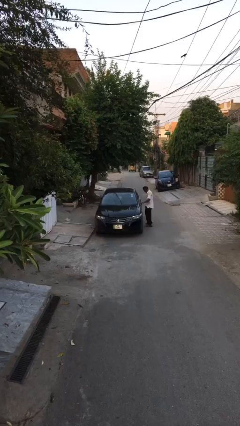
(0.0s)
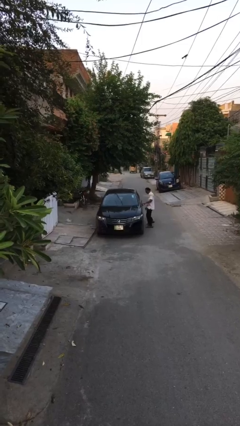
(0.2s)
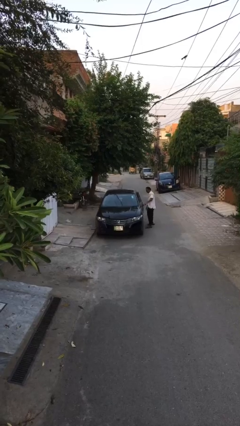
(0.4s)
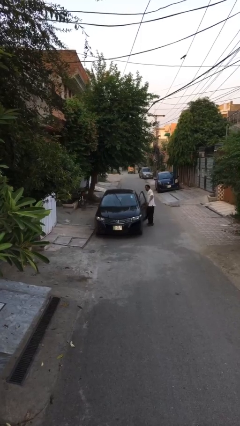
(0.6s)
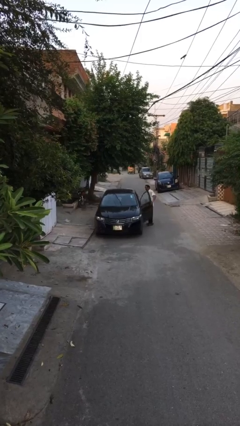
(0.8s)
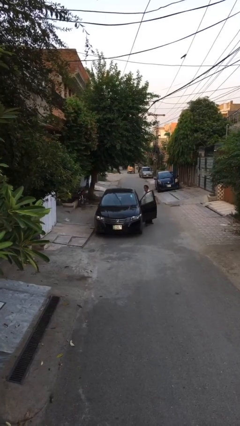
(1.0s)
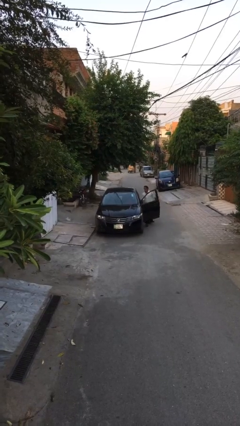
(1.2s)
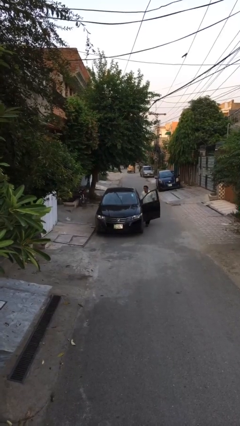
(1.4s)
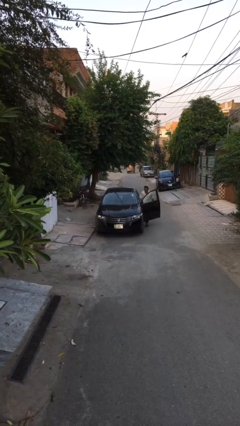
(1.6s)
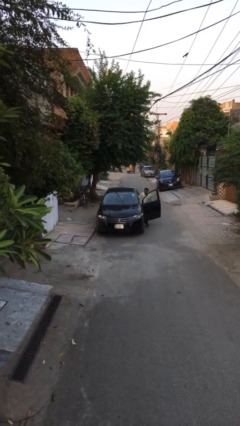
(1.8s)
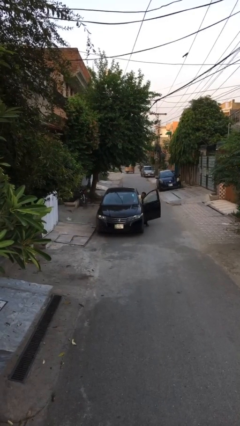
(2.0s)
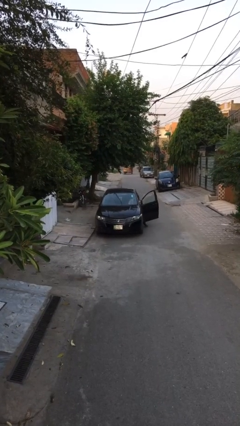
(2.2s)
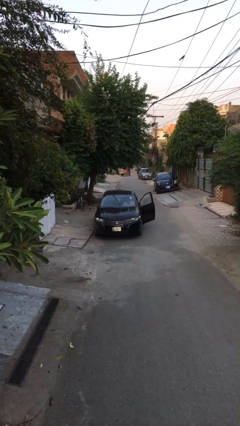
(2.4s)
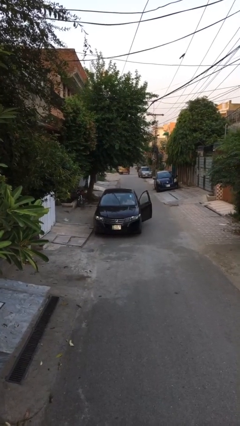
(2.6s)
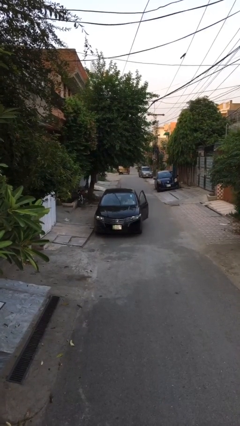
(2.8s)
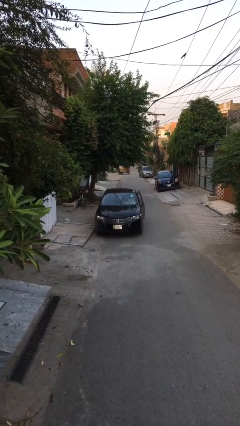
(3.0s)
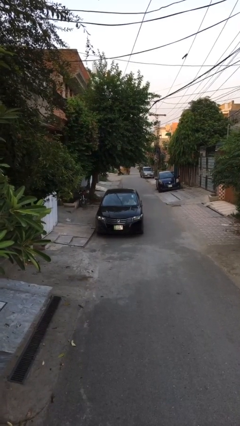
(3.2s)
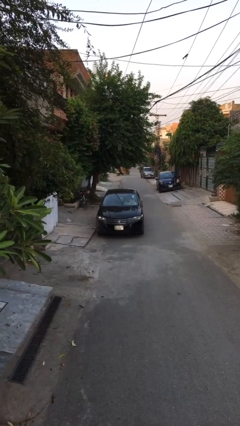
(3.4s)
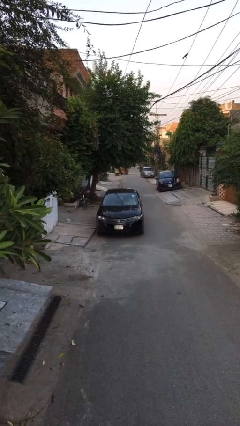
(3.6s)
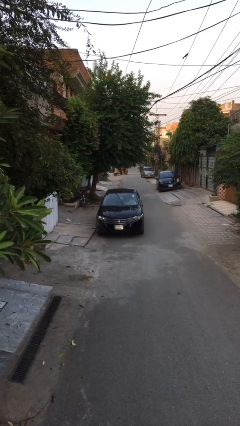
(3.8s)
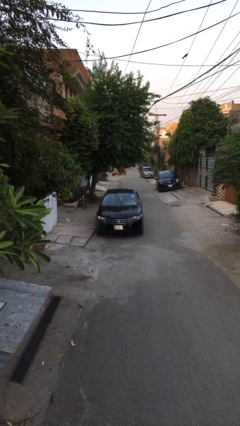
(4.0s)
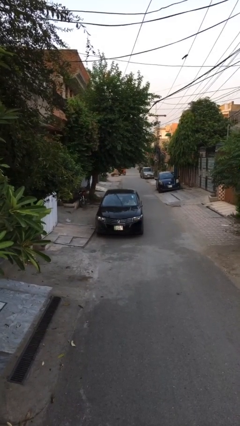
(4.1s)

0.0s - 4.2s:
car picks up person

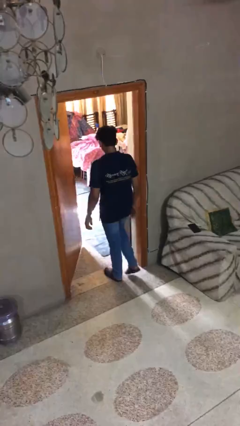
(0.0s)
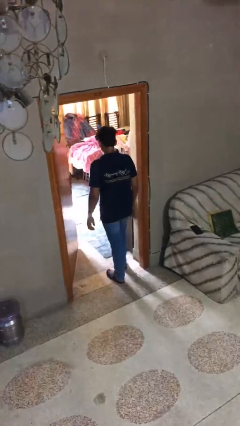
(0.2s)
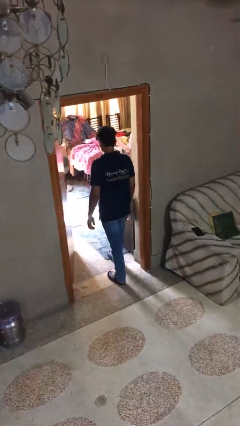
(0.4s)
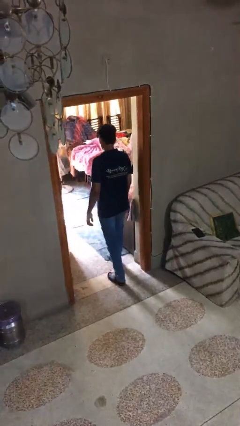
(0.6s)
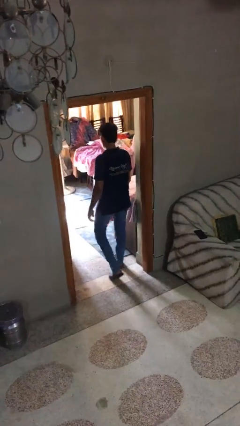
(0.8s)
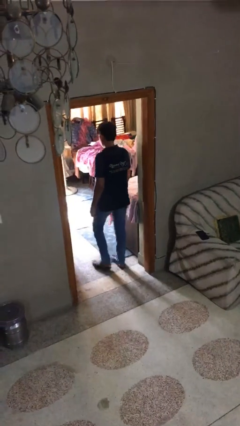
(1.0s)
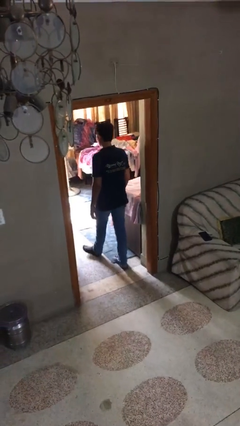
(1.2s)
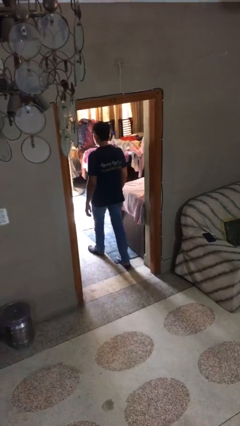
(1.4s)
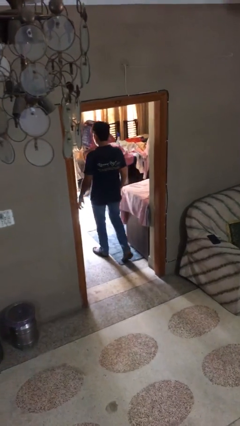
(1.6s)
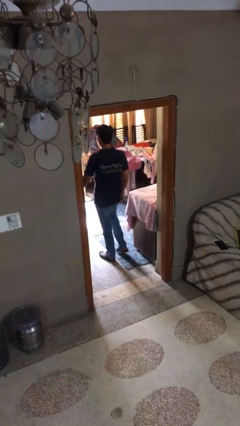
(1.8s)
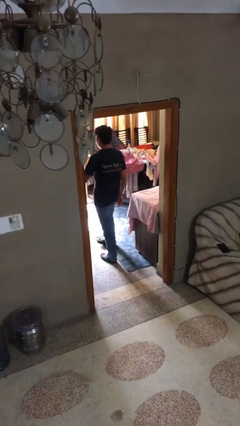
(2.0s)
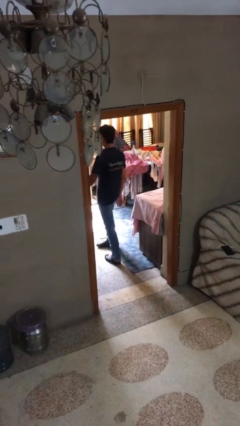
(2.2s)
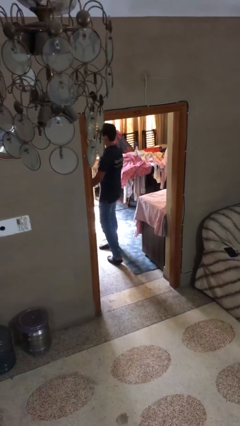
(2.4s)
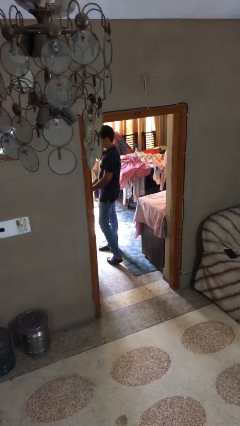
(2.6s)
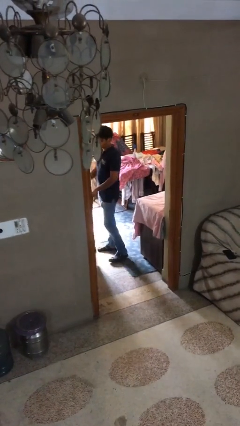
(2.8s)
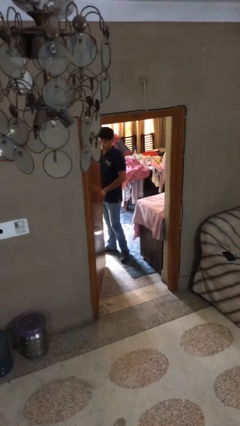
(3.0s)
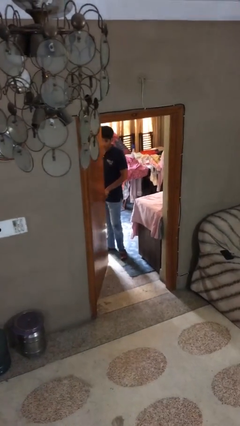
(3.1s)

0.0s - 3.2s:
person exits scene through structure

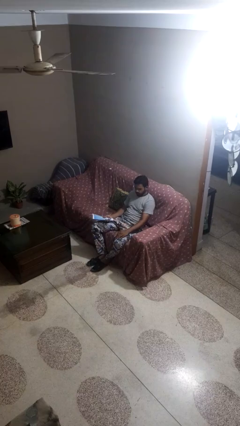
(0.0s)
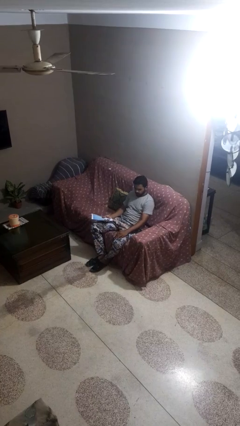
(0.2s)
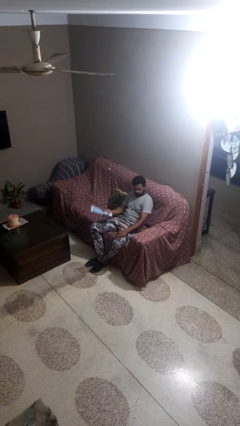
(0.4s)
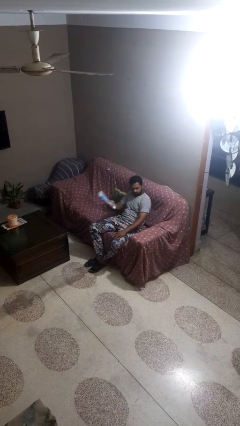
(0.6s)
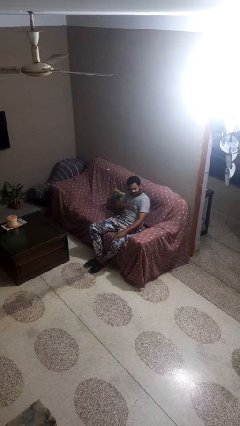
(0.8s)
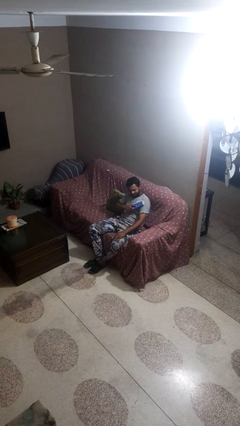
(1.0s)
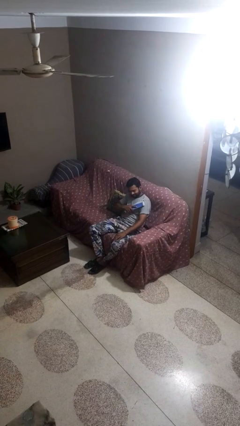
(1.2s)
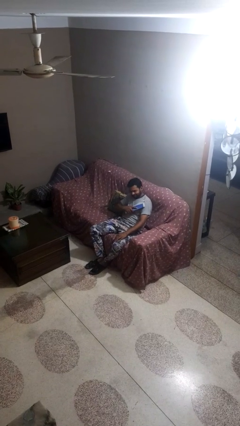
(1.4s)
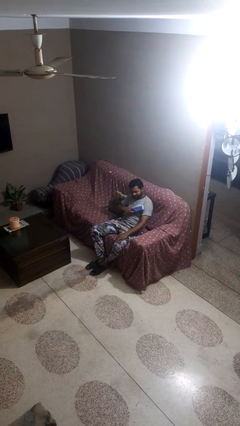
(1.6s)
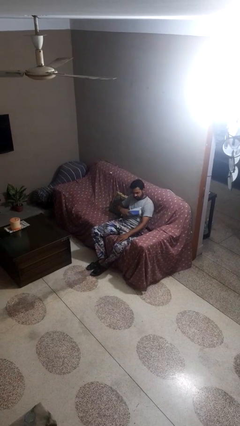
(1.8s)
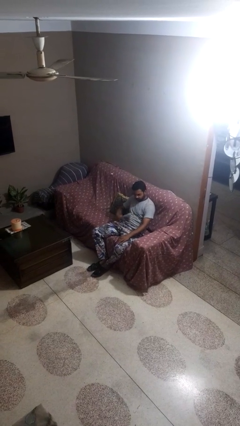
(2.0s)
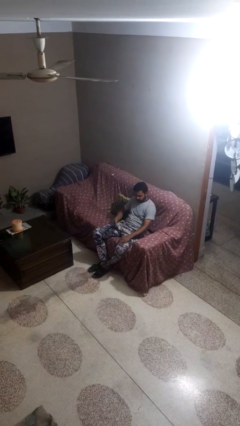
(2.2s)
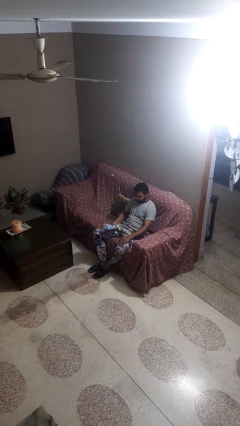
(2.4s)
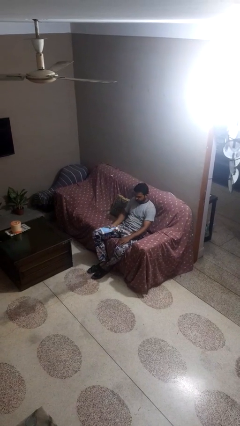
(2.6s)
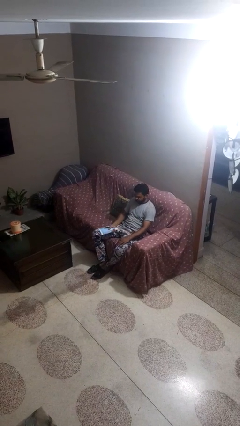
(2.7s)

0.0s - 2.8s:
person swats bug

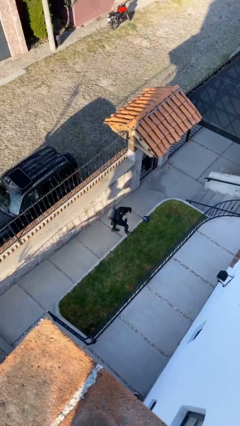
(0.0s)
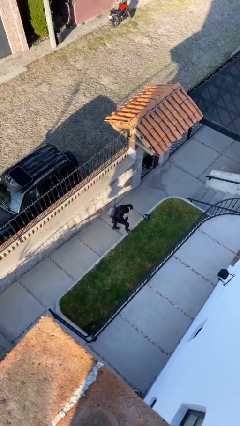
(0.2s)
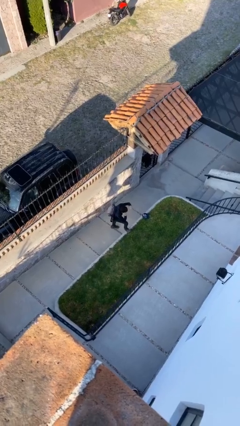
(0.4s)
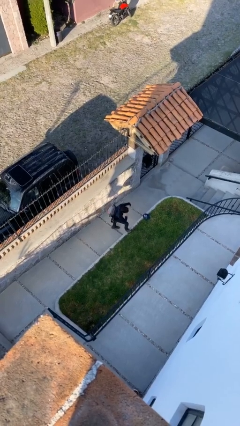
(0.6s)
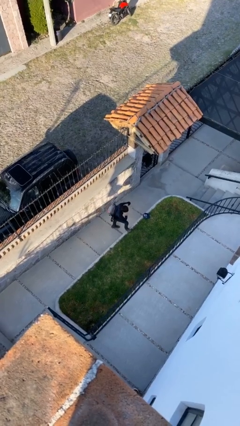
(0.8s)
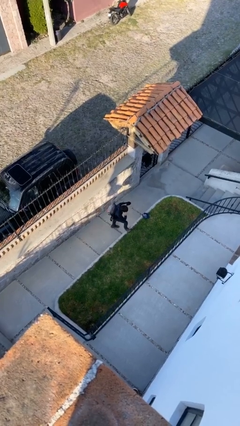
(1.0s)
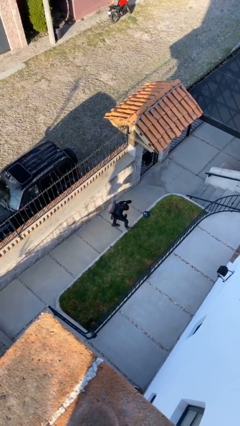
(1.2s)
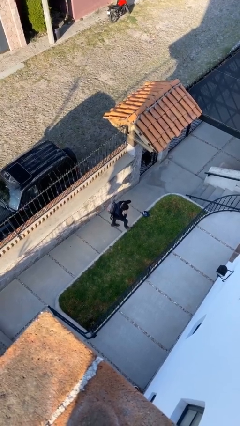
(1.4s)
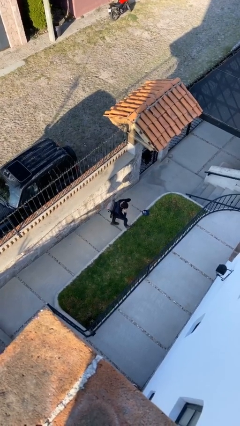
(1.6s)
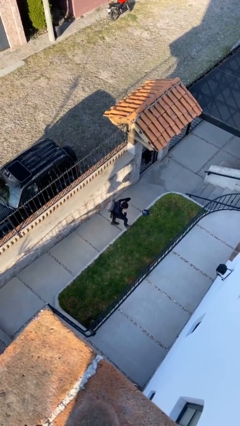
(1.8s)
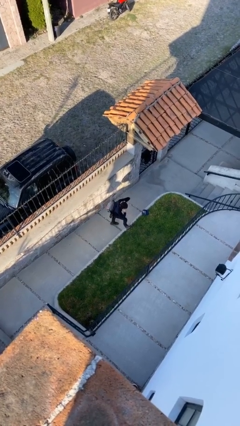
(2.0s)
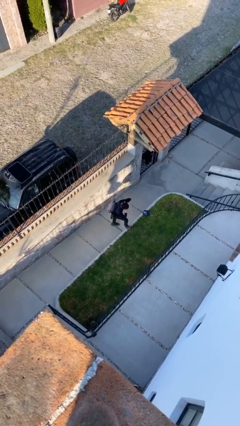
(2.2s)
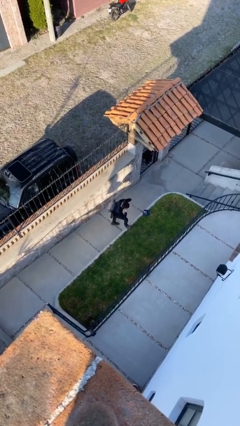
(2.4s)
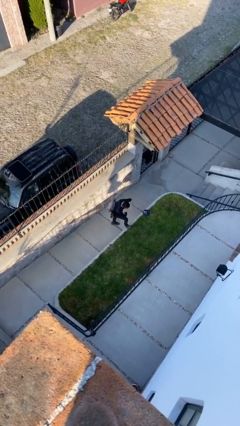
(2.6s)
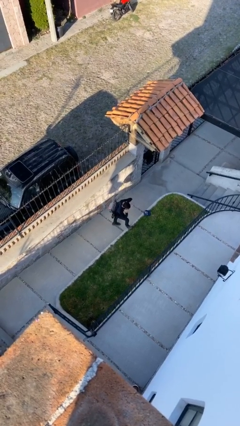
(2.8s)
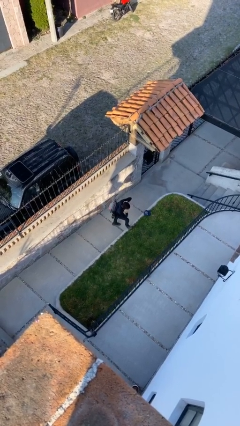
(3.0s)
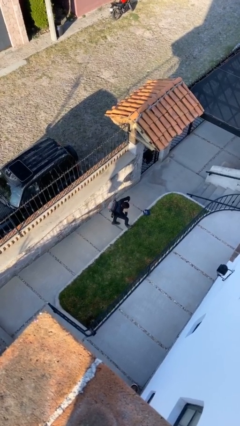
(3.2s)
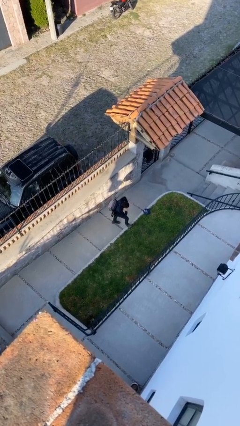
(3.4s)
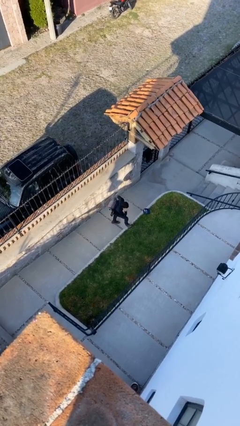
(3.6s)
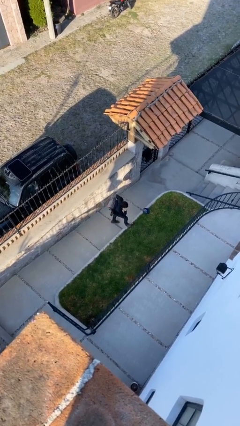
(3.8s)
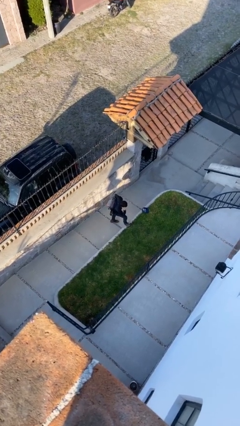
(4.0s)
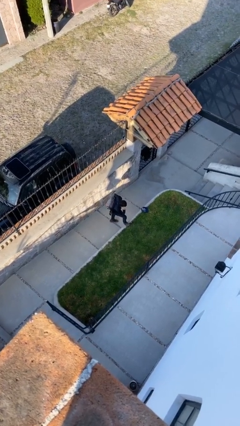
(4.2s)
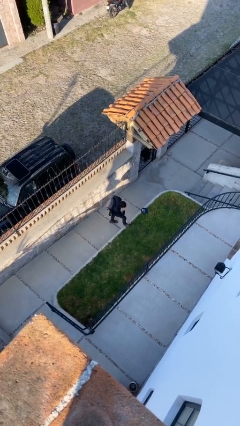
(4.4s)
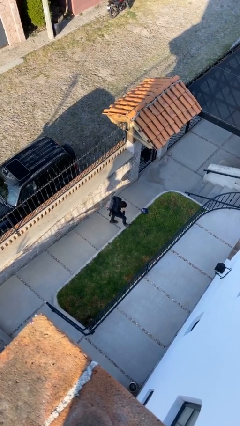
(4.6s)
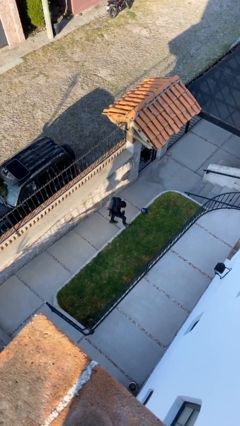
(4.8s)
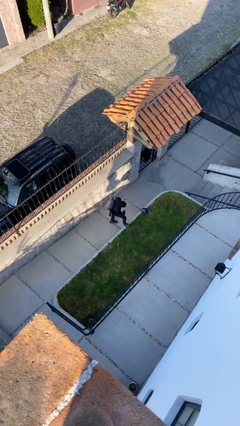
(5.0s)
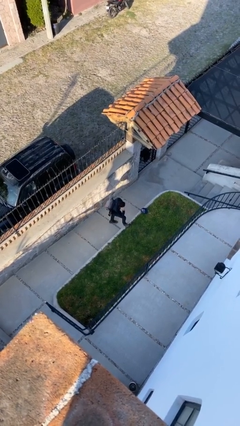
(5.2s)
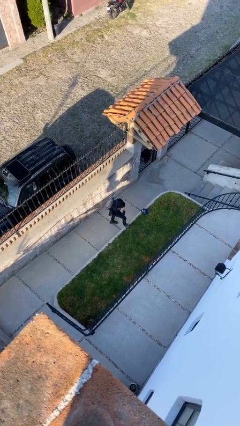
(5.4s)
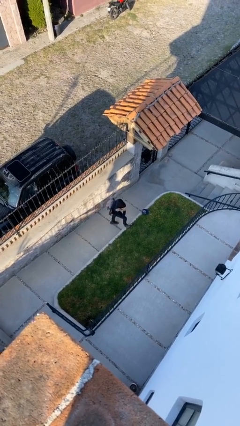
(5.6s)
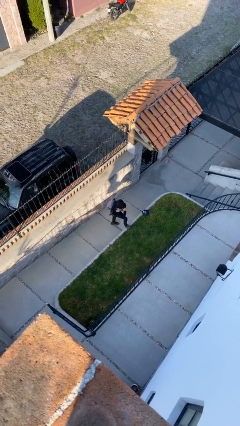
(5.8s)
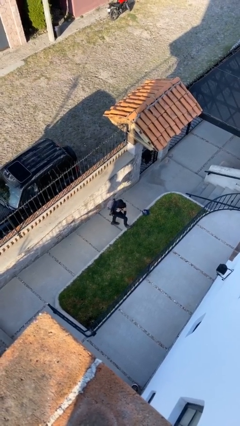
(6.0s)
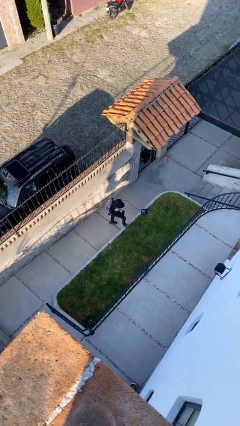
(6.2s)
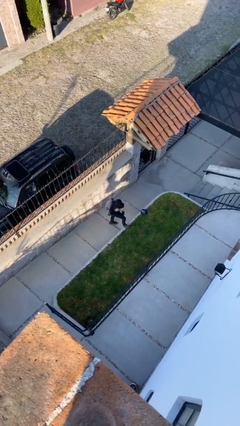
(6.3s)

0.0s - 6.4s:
person talks on phone

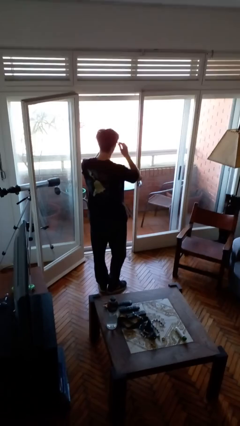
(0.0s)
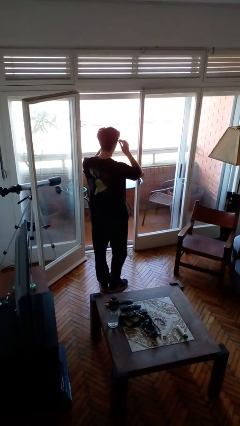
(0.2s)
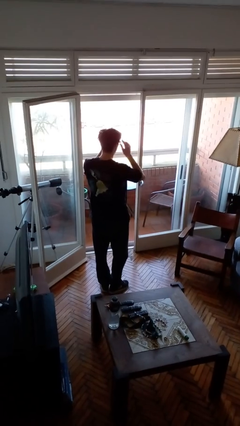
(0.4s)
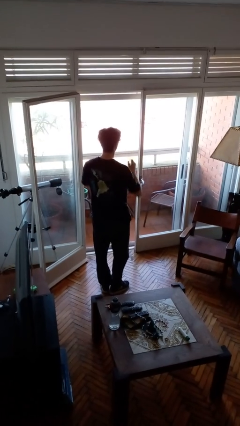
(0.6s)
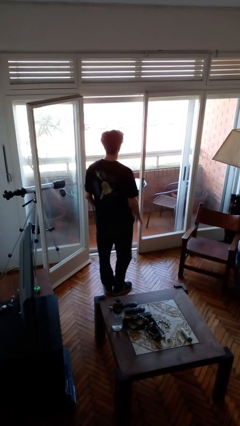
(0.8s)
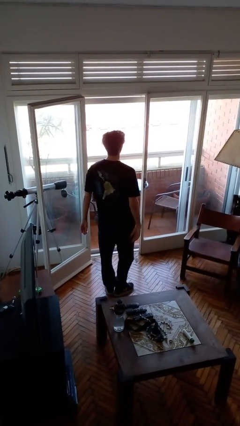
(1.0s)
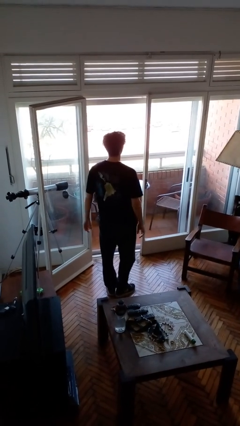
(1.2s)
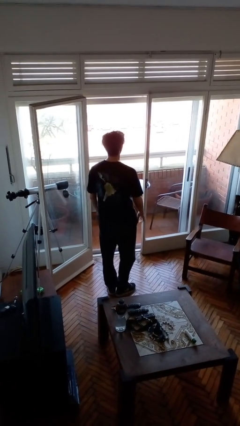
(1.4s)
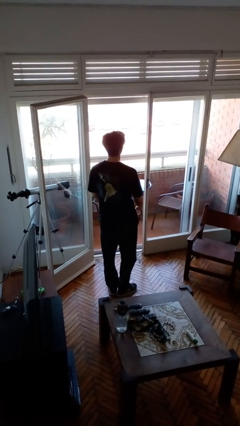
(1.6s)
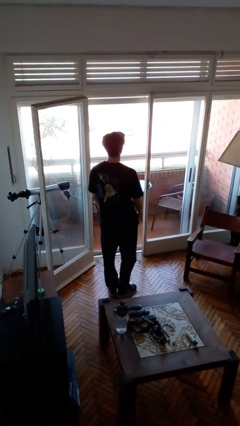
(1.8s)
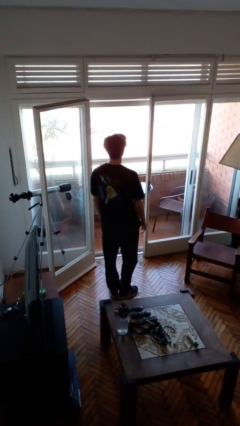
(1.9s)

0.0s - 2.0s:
person puts on sunglasses
